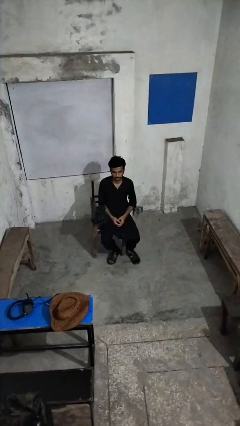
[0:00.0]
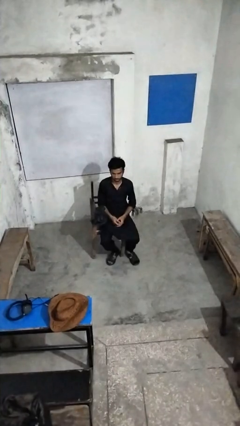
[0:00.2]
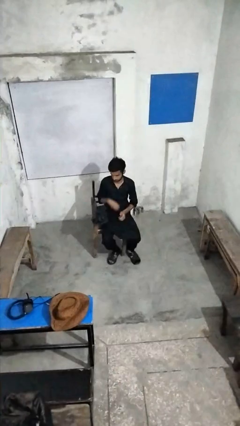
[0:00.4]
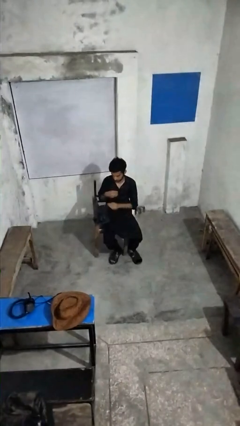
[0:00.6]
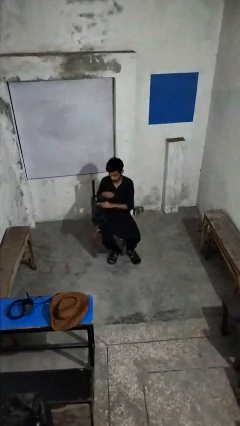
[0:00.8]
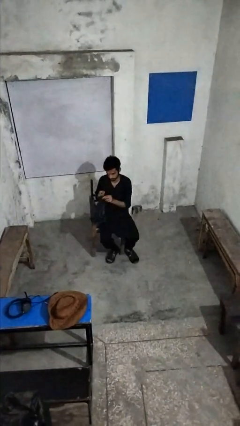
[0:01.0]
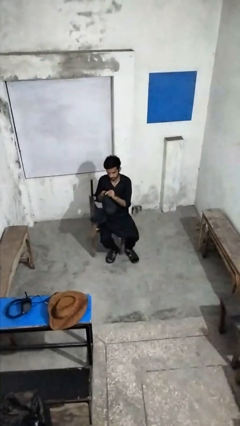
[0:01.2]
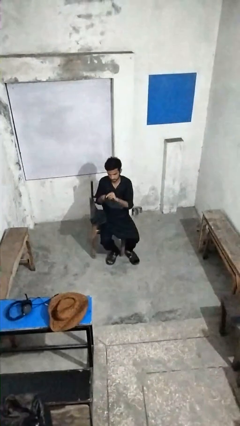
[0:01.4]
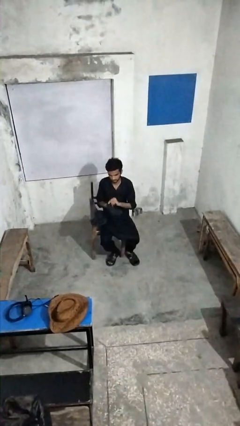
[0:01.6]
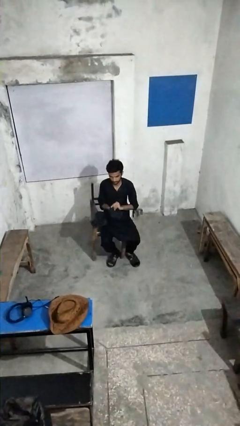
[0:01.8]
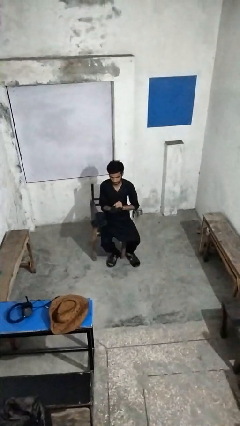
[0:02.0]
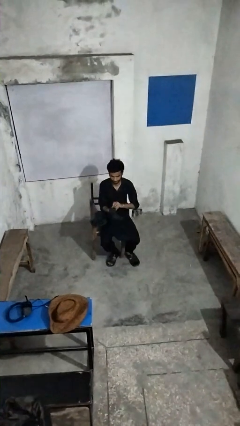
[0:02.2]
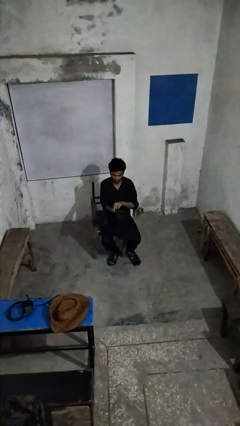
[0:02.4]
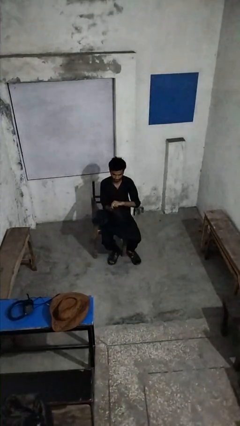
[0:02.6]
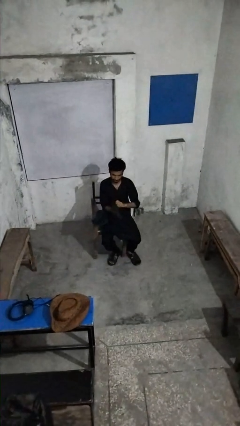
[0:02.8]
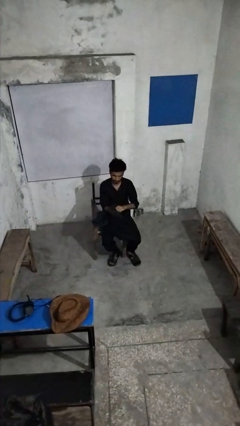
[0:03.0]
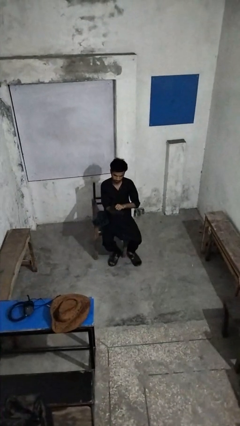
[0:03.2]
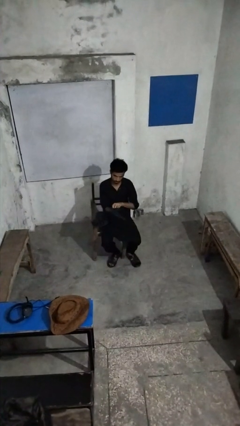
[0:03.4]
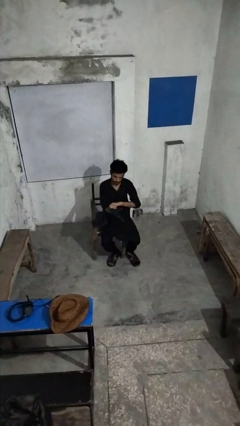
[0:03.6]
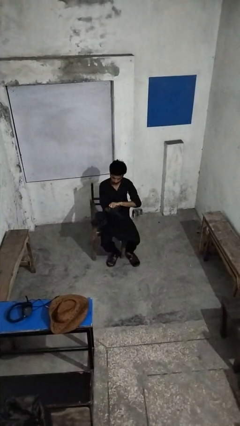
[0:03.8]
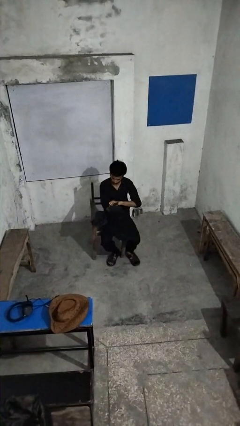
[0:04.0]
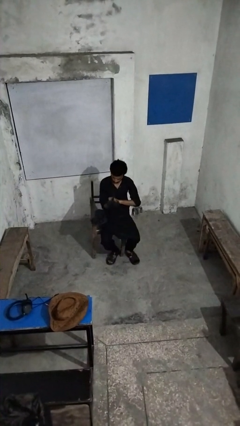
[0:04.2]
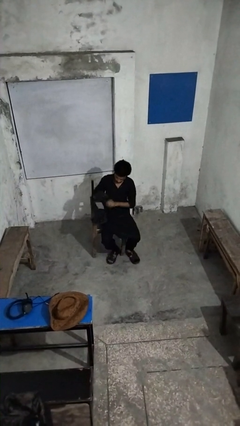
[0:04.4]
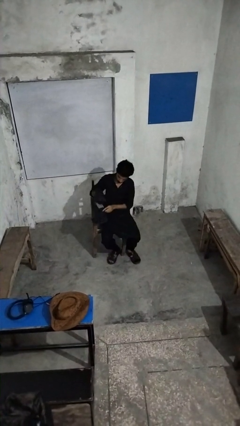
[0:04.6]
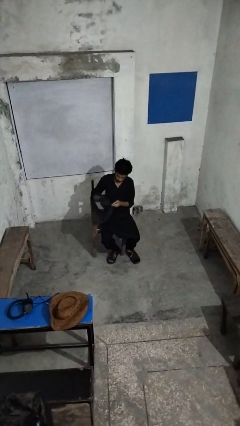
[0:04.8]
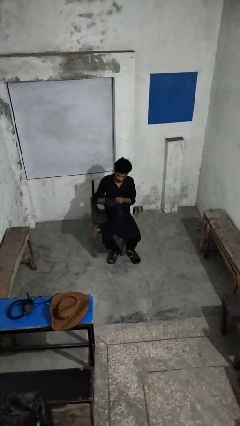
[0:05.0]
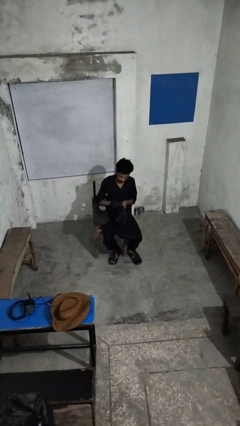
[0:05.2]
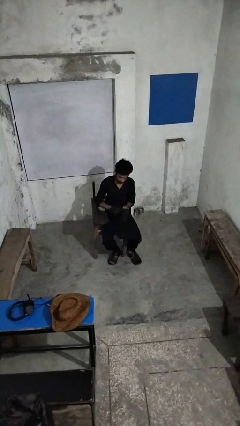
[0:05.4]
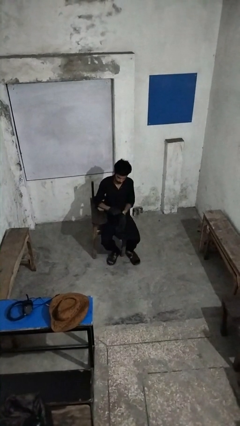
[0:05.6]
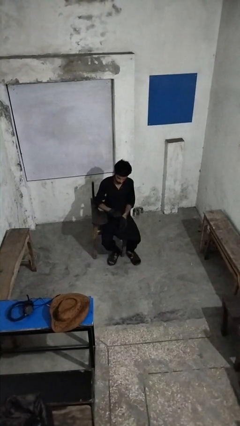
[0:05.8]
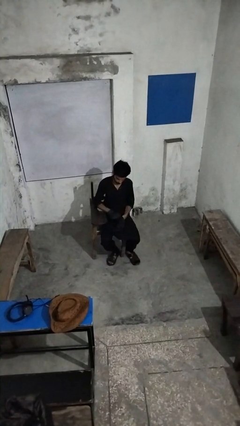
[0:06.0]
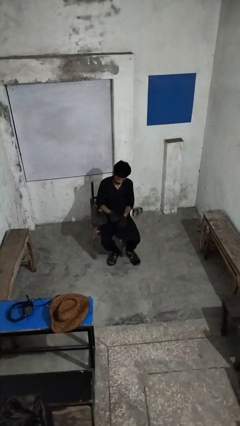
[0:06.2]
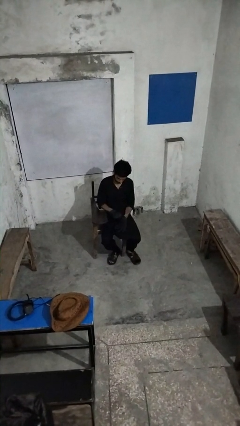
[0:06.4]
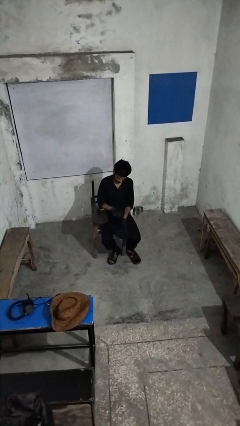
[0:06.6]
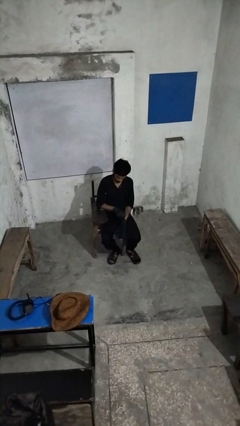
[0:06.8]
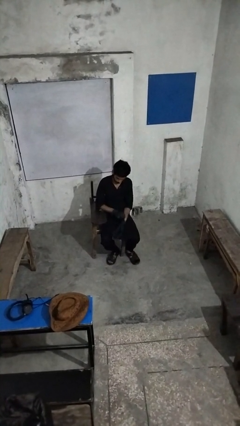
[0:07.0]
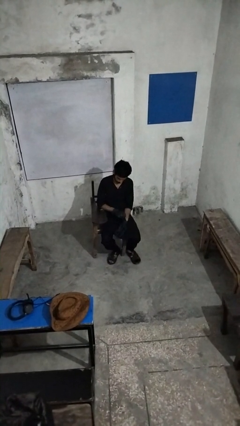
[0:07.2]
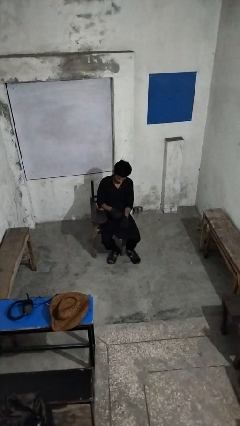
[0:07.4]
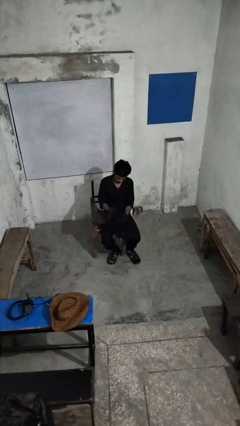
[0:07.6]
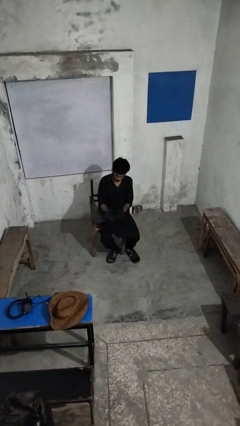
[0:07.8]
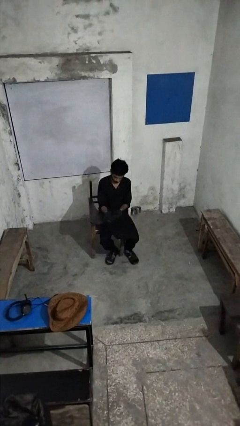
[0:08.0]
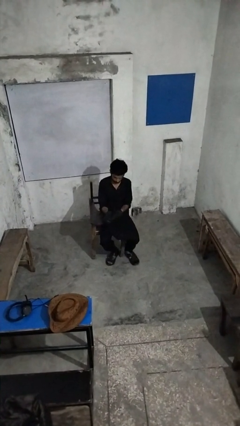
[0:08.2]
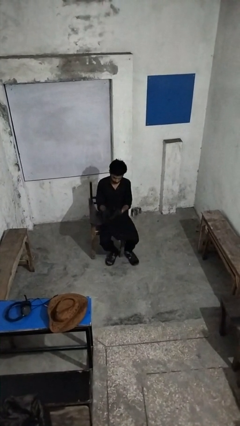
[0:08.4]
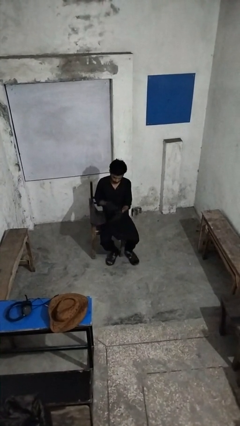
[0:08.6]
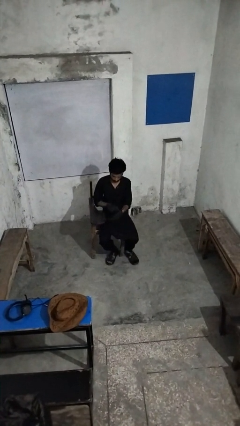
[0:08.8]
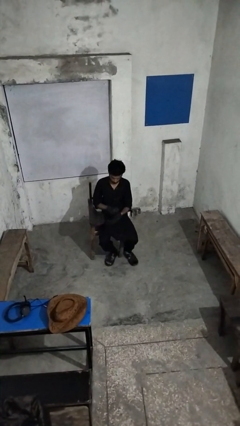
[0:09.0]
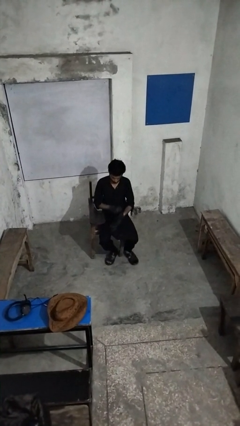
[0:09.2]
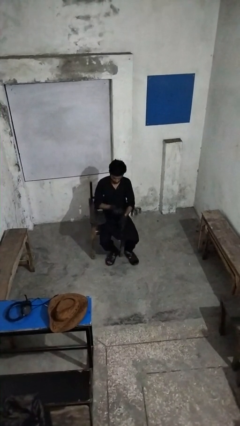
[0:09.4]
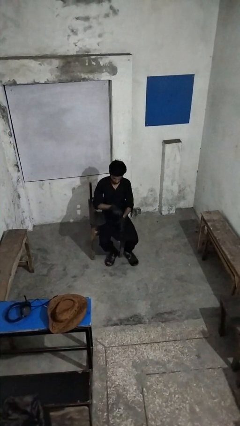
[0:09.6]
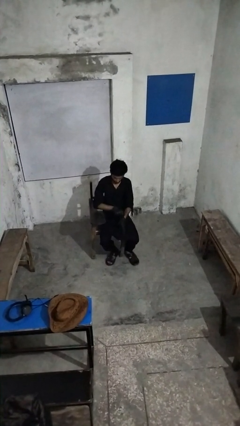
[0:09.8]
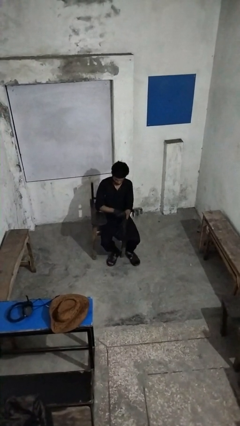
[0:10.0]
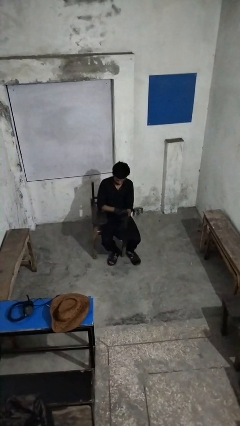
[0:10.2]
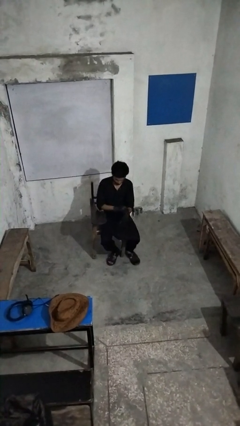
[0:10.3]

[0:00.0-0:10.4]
person puts on gloves

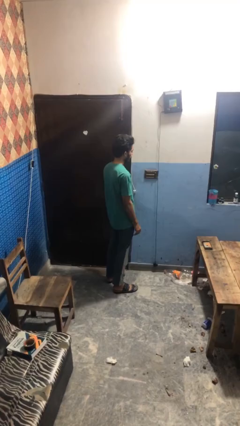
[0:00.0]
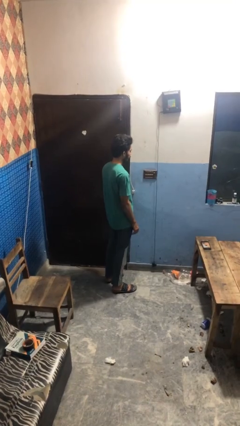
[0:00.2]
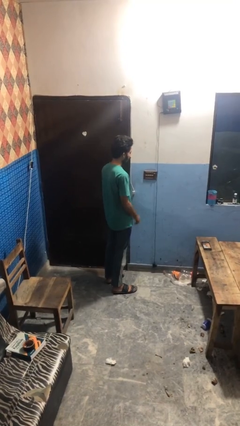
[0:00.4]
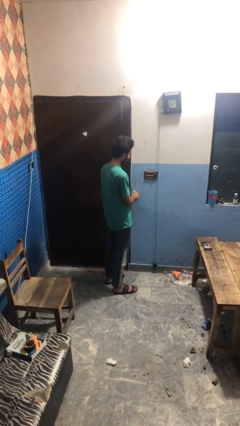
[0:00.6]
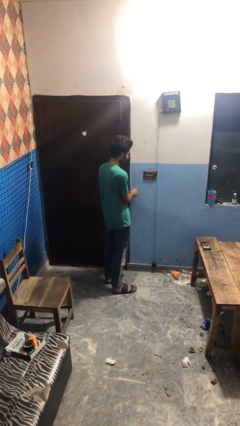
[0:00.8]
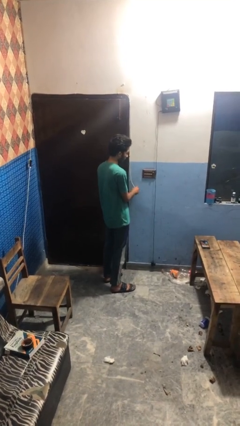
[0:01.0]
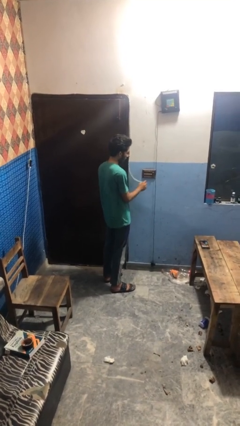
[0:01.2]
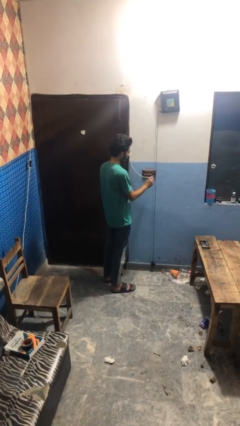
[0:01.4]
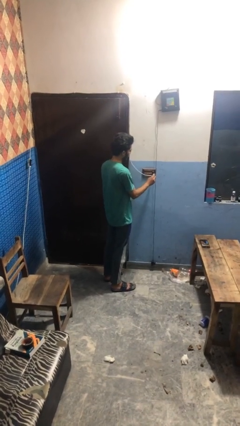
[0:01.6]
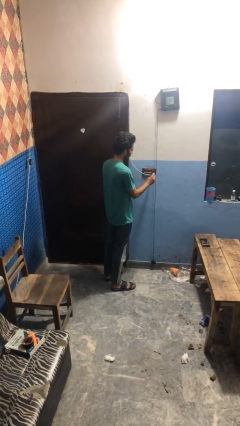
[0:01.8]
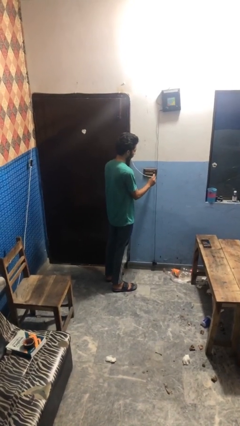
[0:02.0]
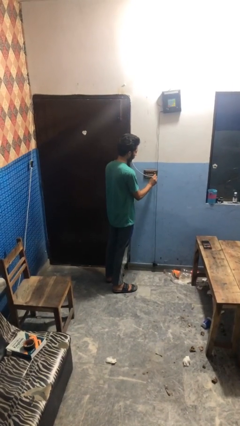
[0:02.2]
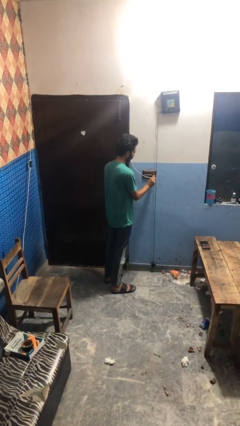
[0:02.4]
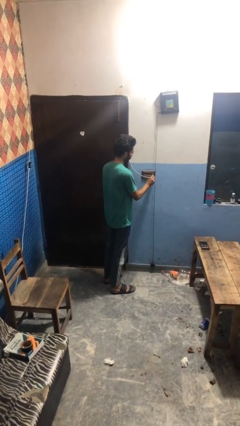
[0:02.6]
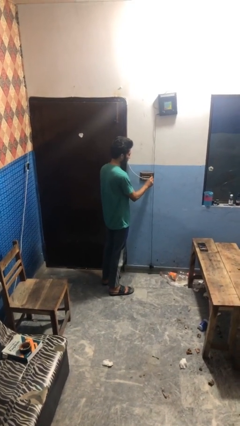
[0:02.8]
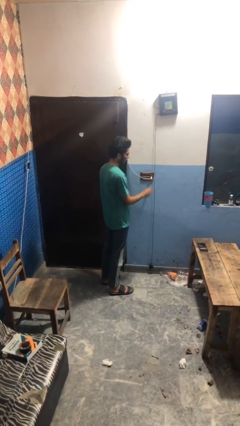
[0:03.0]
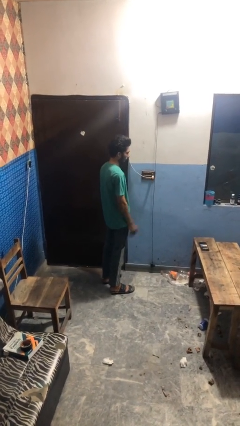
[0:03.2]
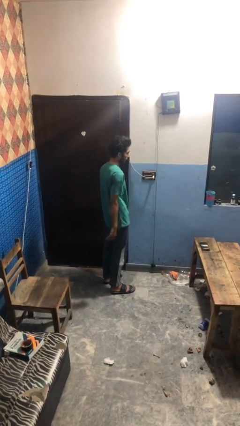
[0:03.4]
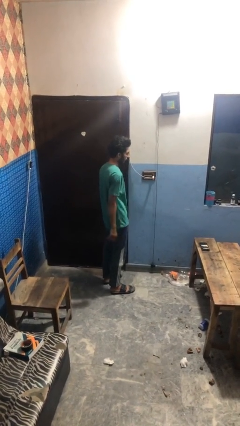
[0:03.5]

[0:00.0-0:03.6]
person plugs into electrical socket

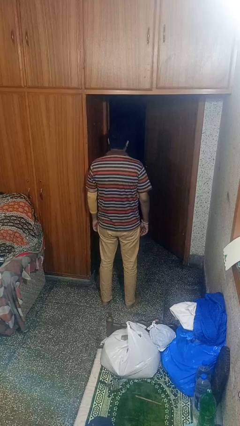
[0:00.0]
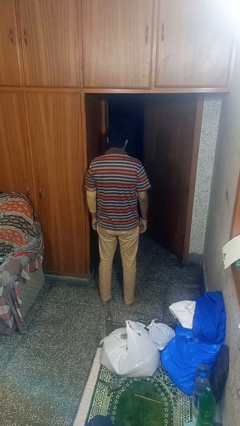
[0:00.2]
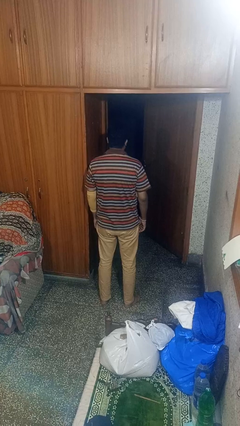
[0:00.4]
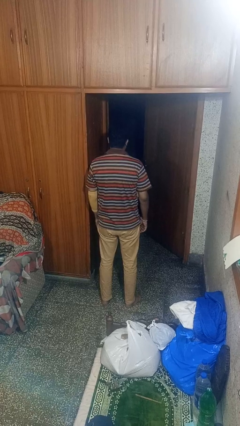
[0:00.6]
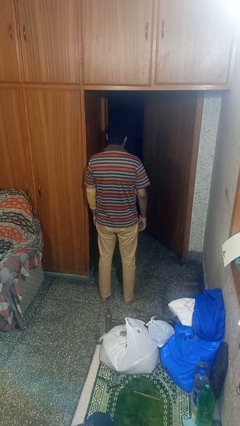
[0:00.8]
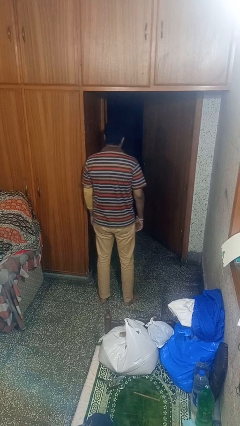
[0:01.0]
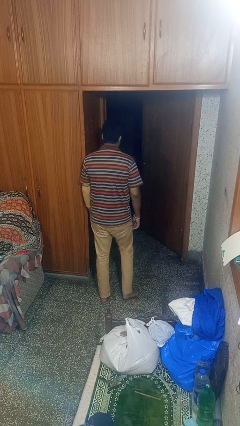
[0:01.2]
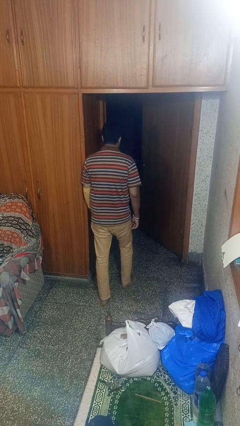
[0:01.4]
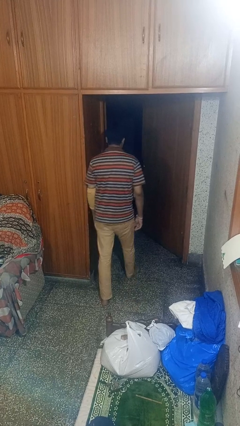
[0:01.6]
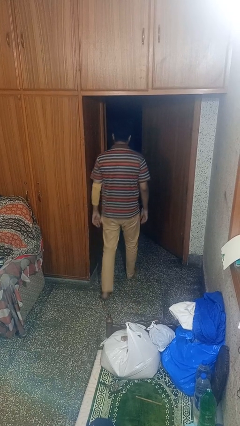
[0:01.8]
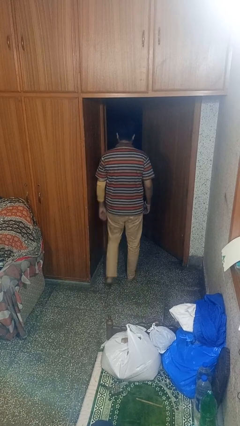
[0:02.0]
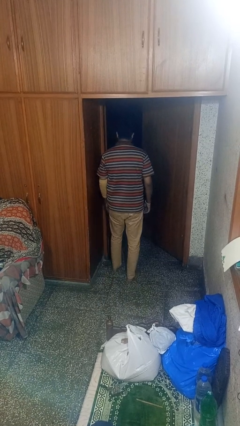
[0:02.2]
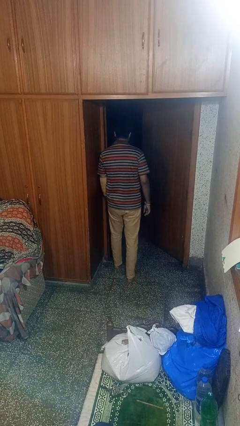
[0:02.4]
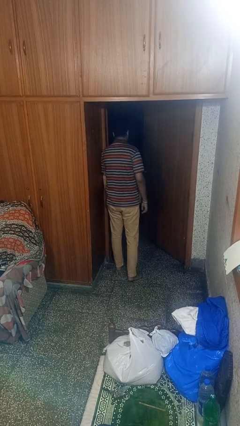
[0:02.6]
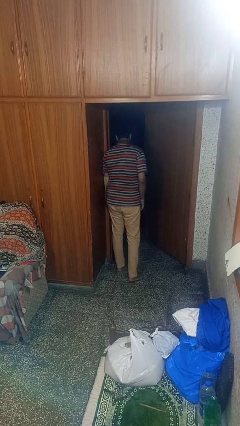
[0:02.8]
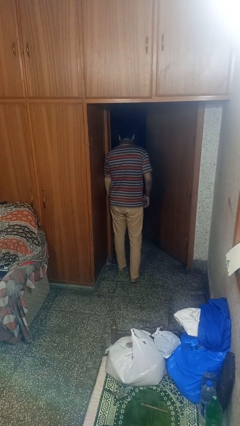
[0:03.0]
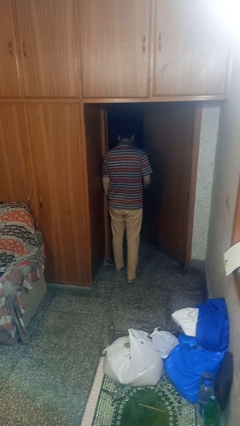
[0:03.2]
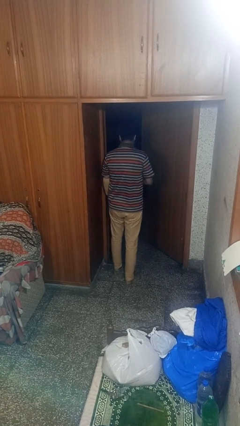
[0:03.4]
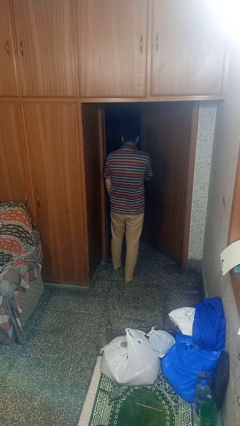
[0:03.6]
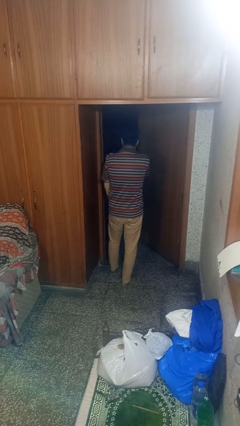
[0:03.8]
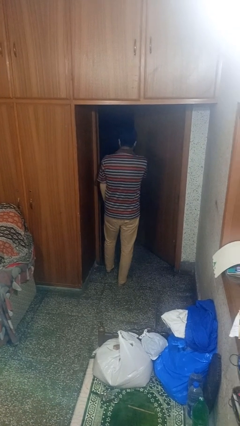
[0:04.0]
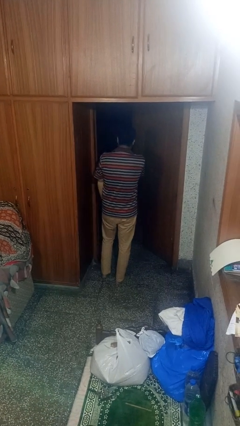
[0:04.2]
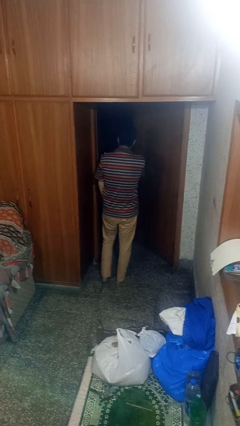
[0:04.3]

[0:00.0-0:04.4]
person bumps into wall
